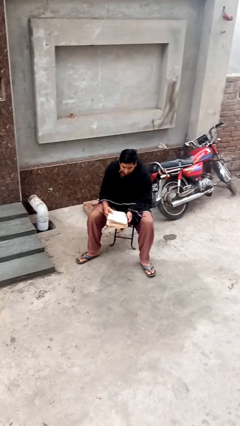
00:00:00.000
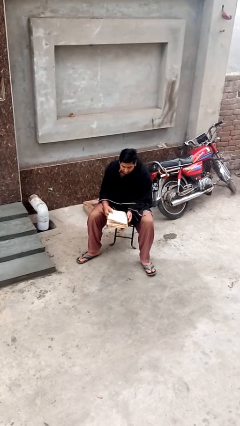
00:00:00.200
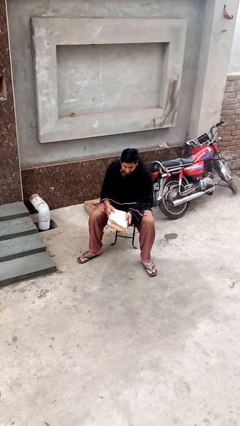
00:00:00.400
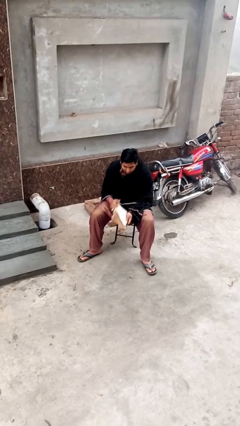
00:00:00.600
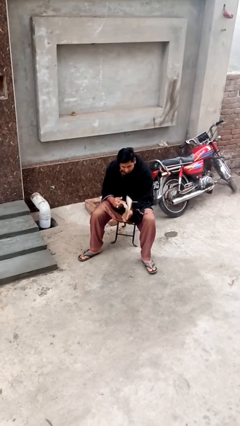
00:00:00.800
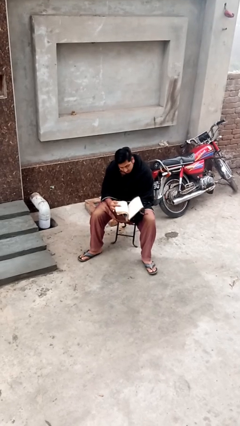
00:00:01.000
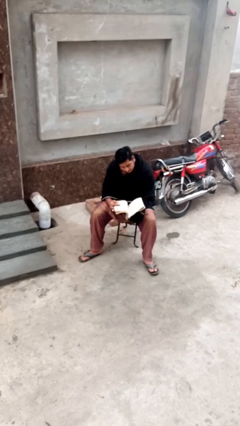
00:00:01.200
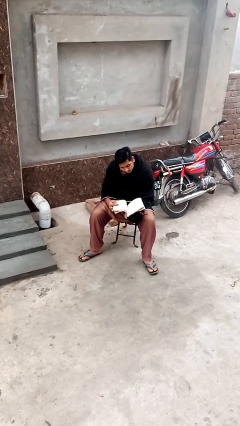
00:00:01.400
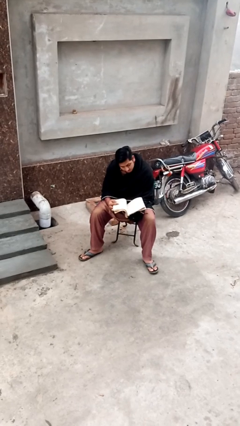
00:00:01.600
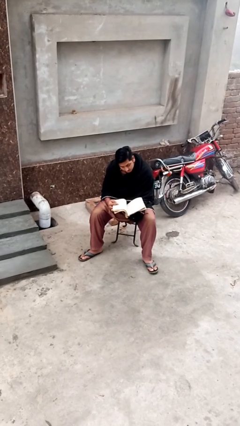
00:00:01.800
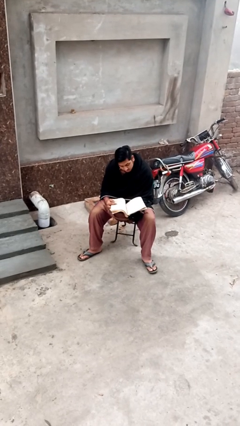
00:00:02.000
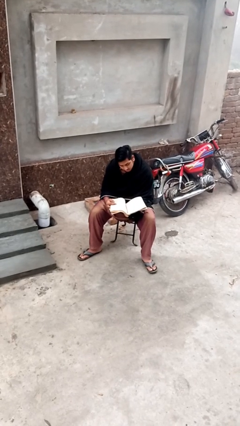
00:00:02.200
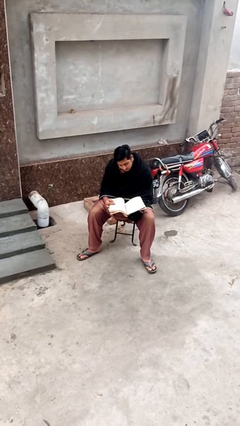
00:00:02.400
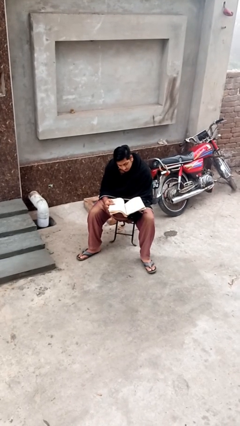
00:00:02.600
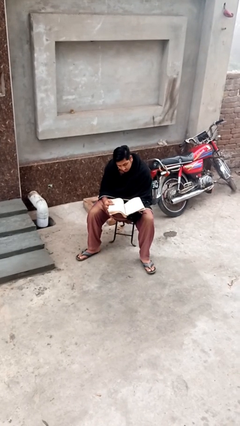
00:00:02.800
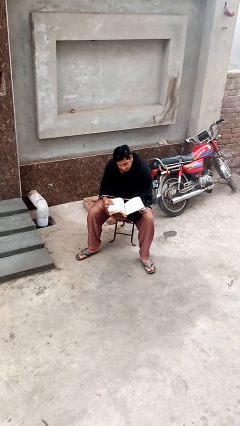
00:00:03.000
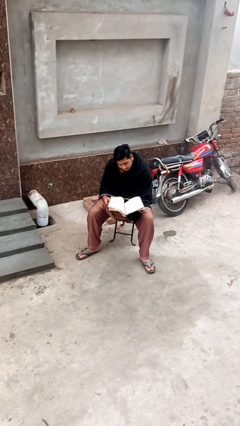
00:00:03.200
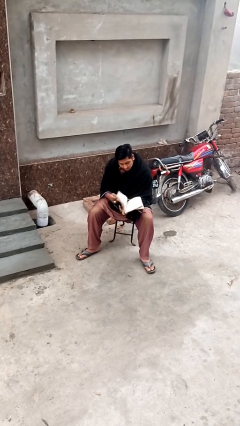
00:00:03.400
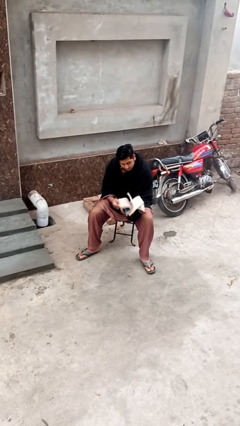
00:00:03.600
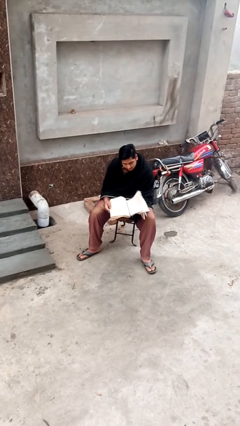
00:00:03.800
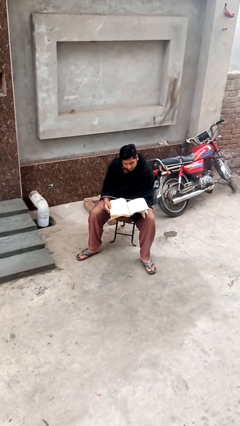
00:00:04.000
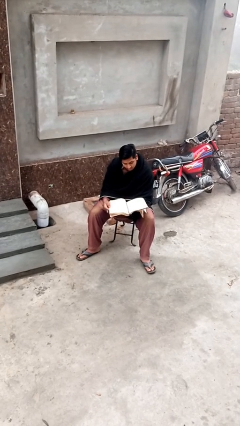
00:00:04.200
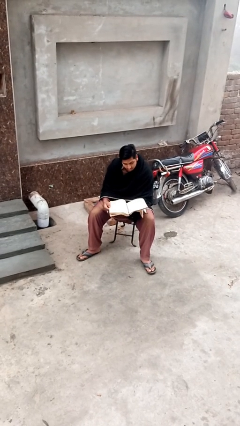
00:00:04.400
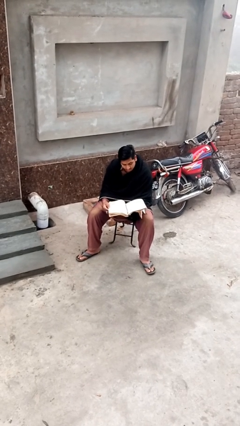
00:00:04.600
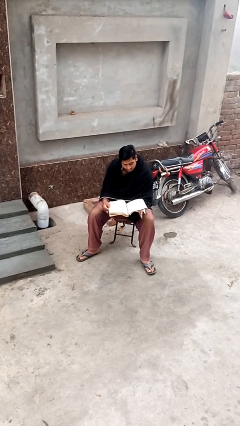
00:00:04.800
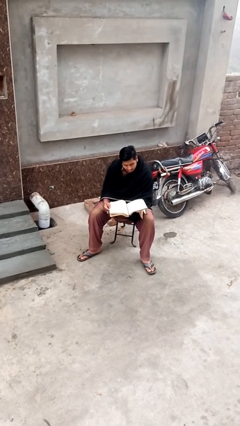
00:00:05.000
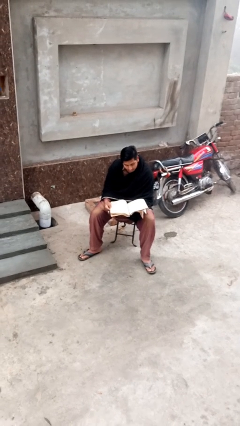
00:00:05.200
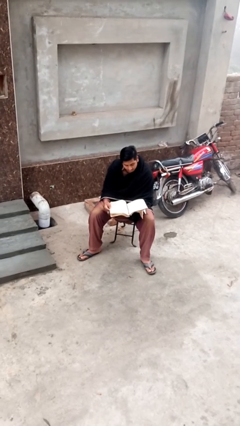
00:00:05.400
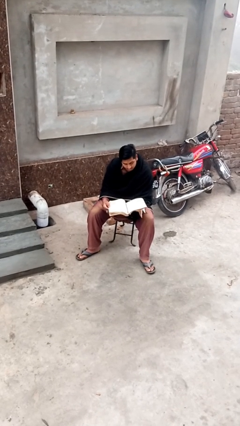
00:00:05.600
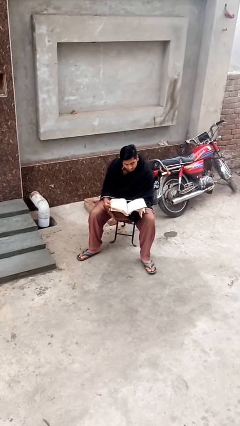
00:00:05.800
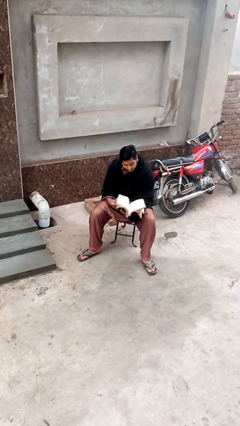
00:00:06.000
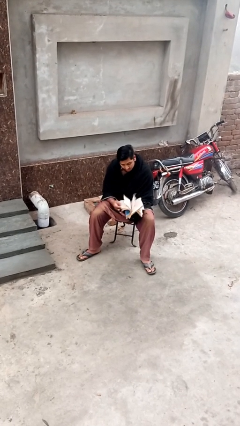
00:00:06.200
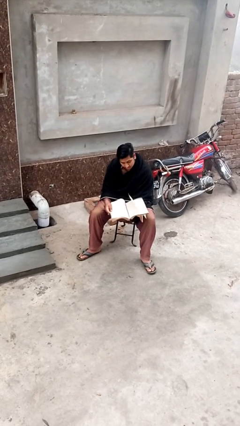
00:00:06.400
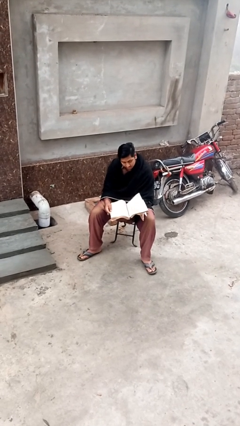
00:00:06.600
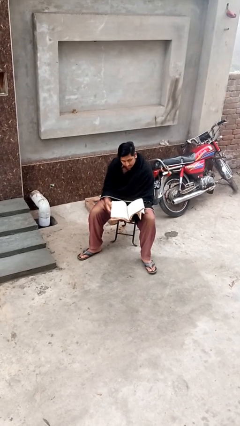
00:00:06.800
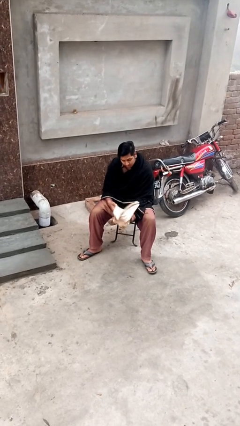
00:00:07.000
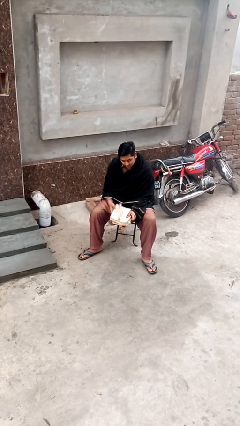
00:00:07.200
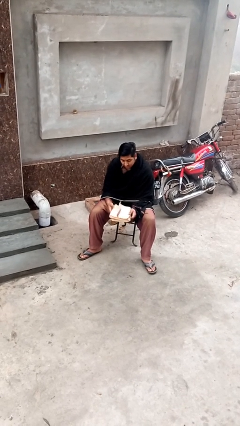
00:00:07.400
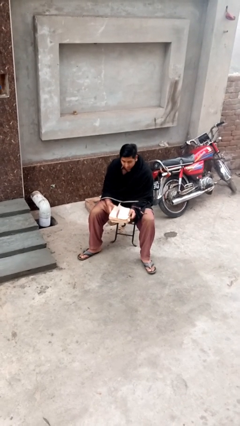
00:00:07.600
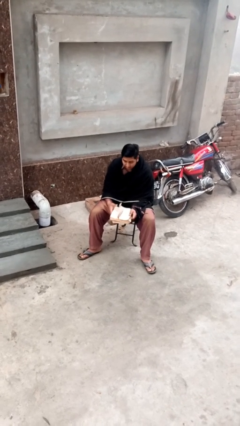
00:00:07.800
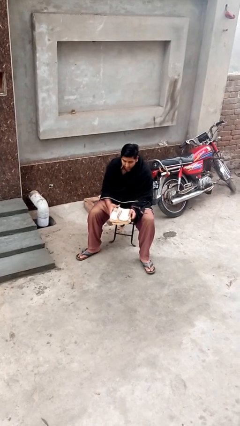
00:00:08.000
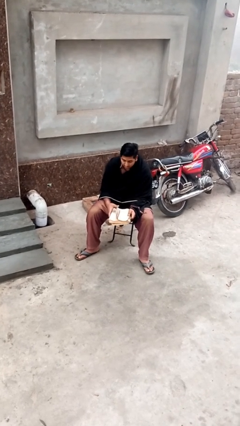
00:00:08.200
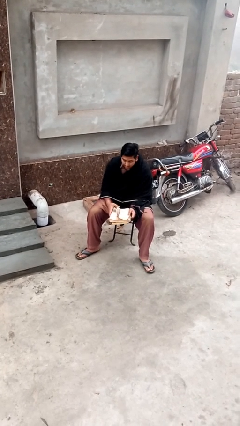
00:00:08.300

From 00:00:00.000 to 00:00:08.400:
person reads document

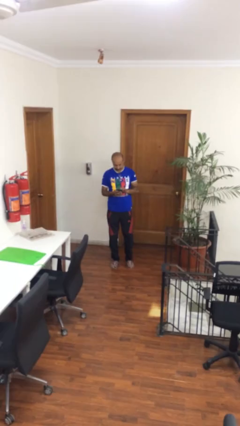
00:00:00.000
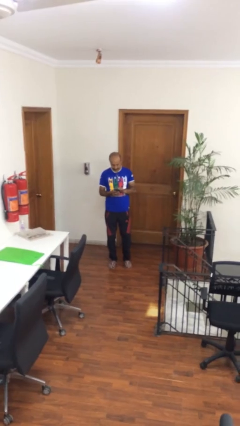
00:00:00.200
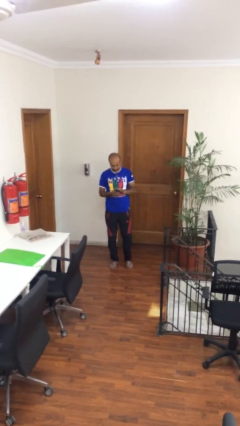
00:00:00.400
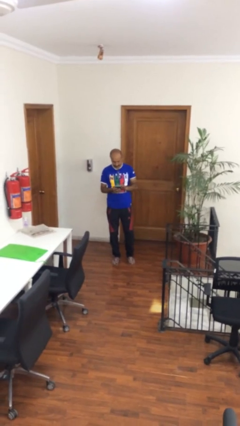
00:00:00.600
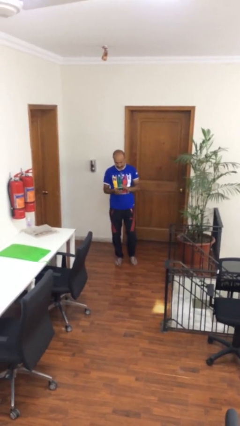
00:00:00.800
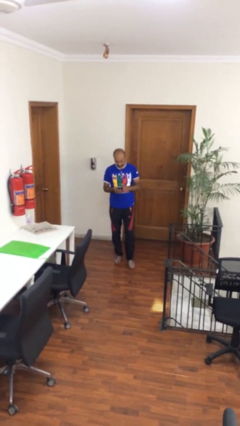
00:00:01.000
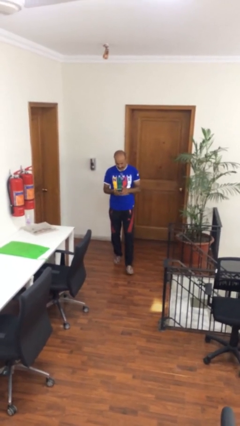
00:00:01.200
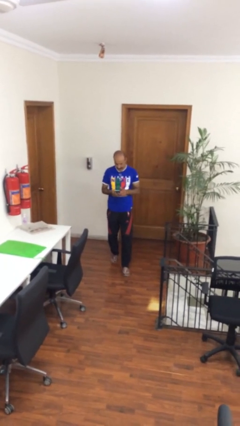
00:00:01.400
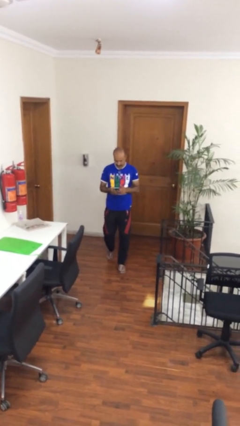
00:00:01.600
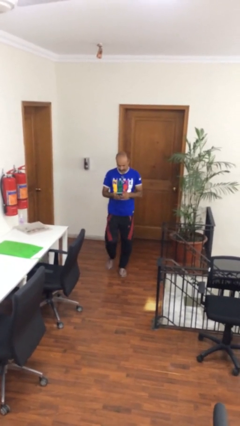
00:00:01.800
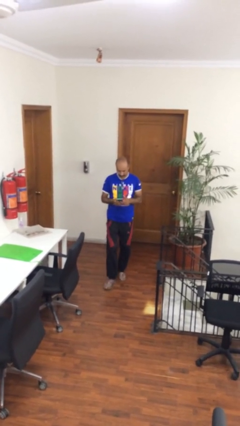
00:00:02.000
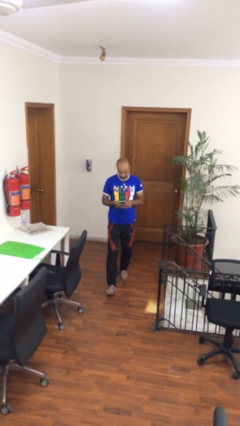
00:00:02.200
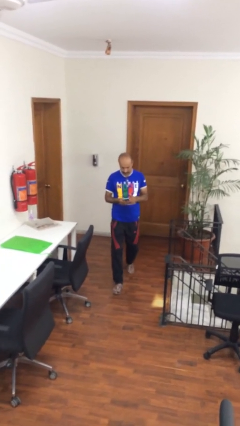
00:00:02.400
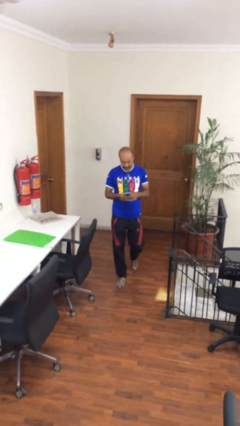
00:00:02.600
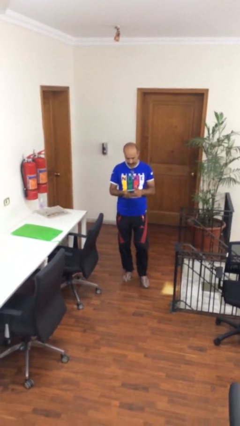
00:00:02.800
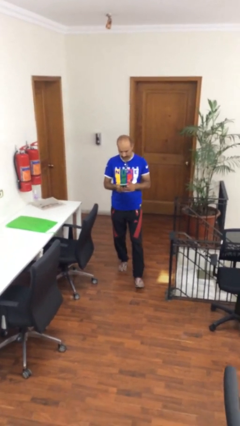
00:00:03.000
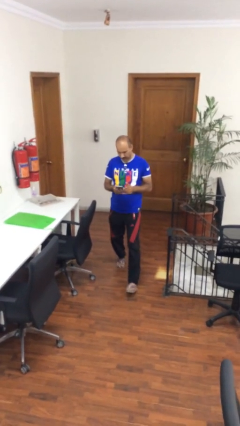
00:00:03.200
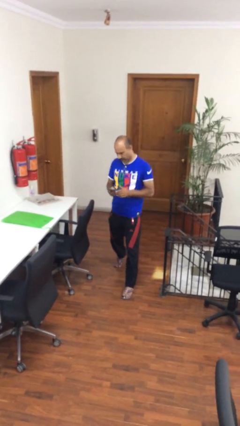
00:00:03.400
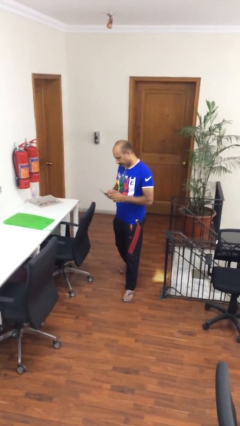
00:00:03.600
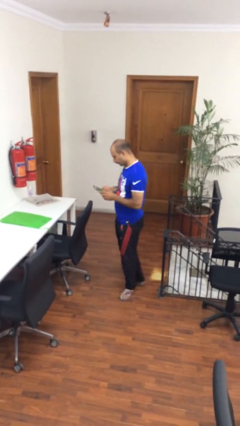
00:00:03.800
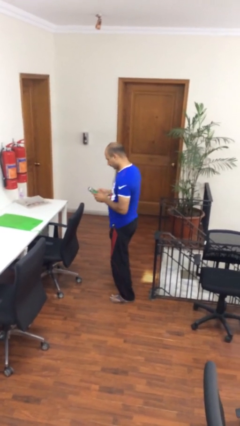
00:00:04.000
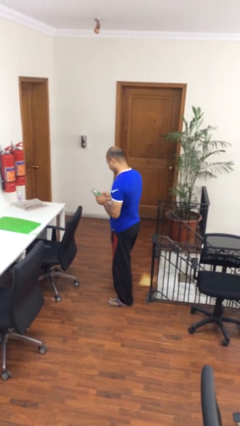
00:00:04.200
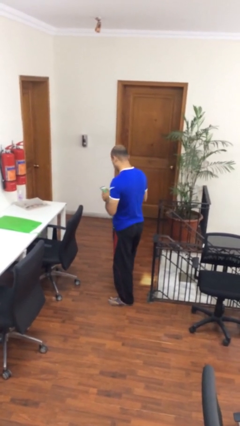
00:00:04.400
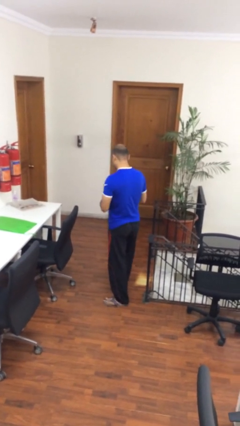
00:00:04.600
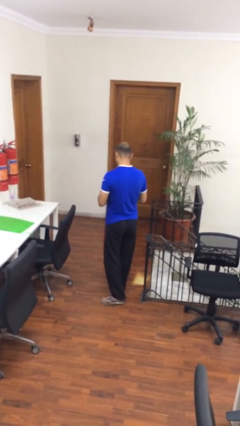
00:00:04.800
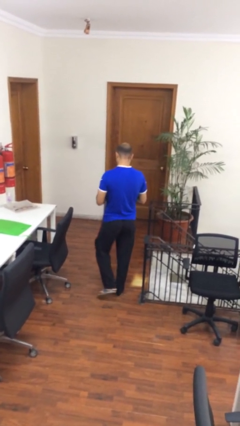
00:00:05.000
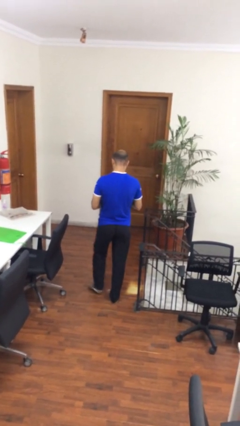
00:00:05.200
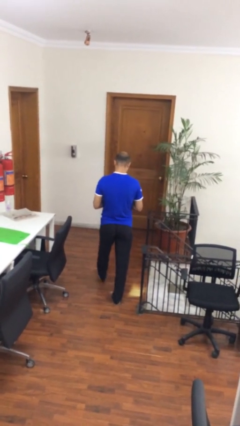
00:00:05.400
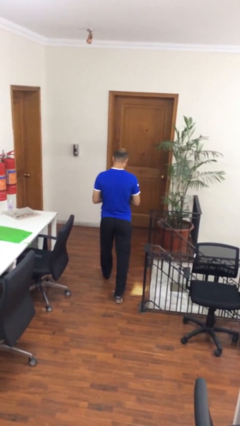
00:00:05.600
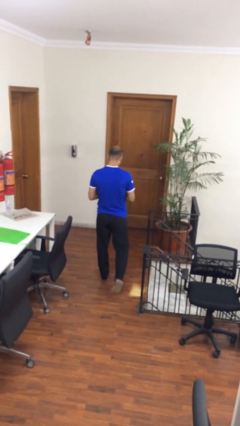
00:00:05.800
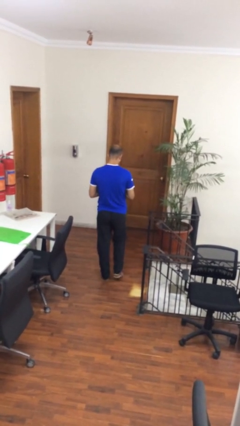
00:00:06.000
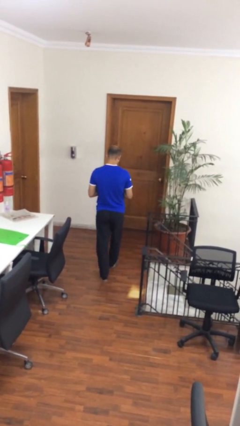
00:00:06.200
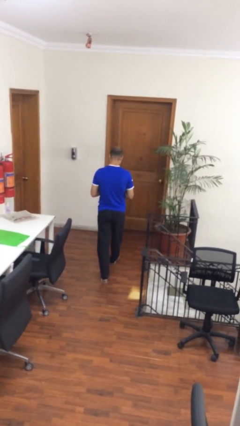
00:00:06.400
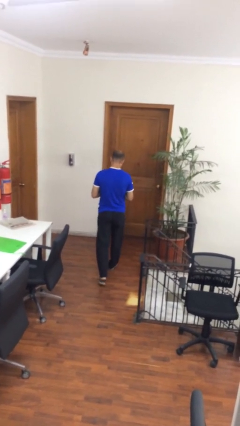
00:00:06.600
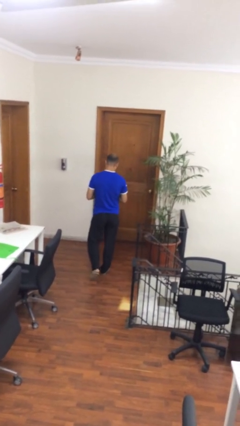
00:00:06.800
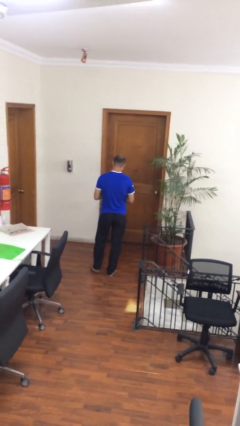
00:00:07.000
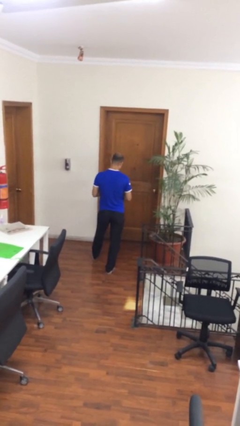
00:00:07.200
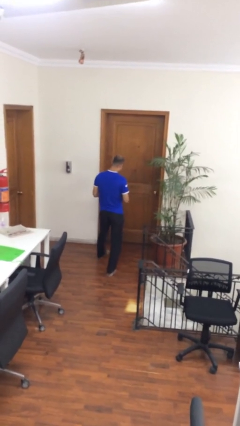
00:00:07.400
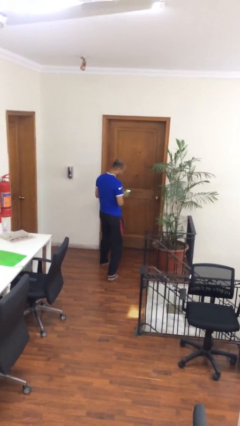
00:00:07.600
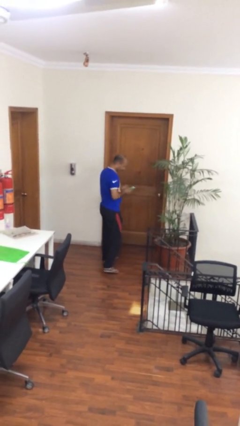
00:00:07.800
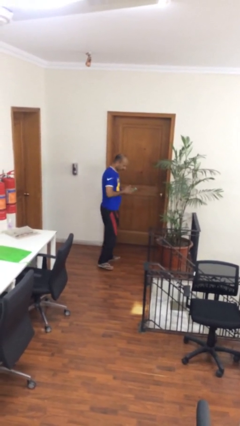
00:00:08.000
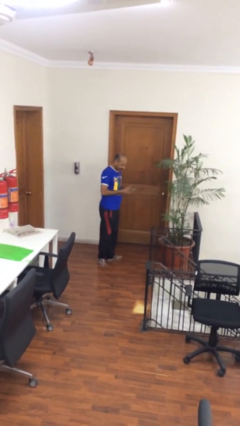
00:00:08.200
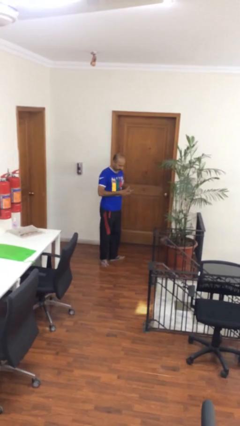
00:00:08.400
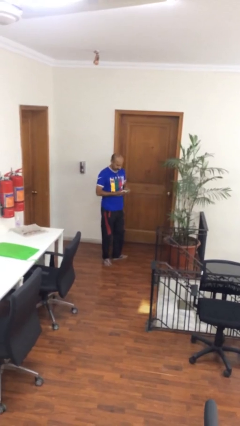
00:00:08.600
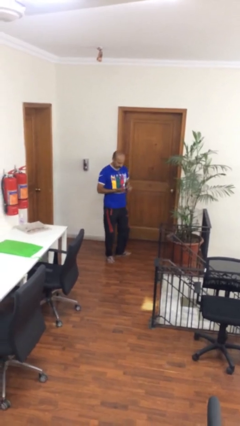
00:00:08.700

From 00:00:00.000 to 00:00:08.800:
person texts on phone

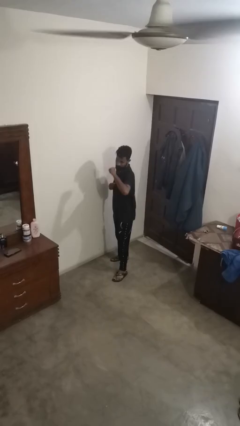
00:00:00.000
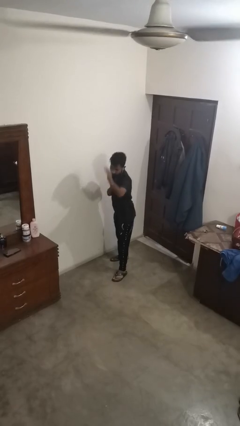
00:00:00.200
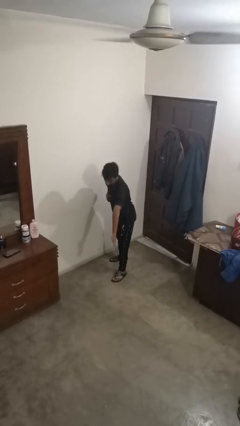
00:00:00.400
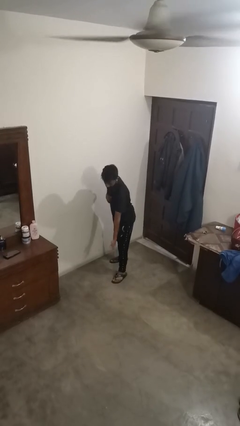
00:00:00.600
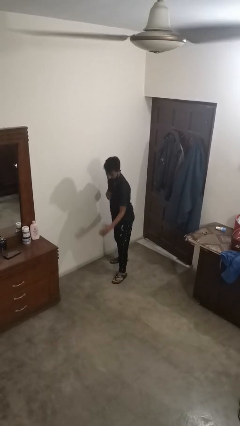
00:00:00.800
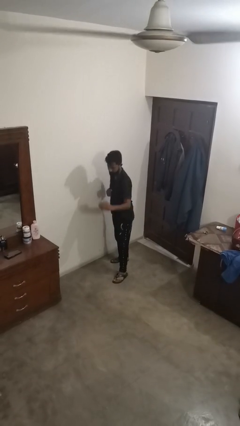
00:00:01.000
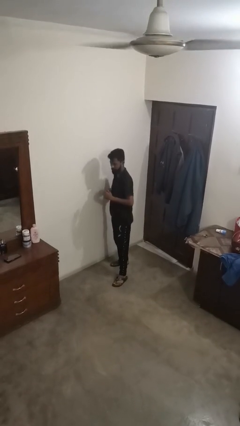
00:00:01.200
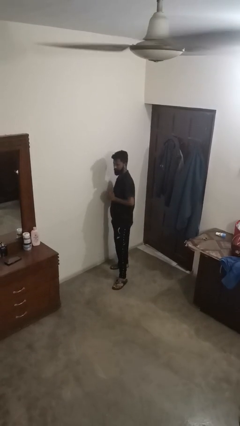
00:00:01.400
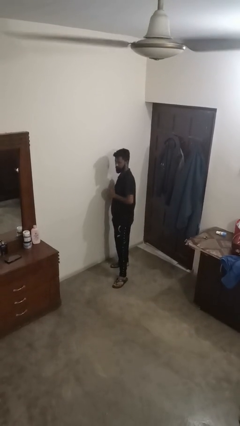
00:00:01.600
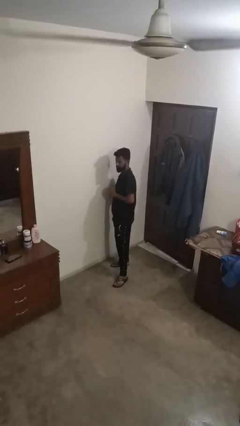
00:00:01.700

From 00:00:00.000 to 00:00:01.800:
person karate chop
